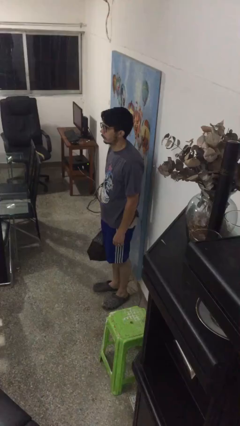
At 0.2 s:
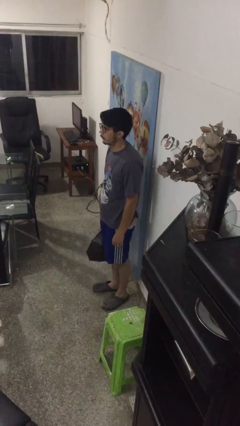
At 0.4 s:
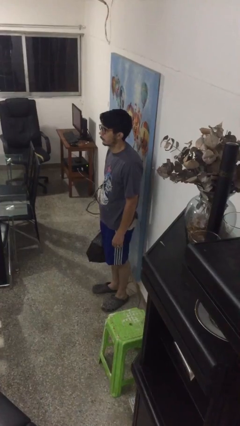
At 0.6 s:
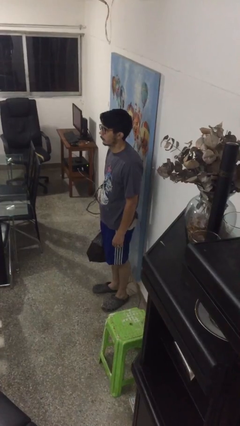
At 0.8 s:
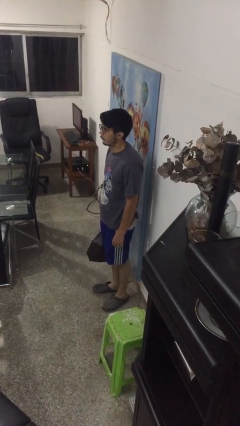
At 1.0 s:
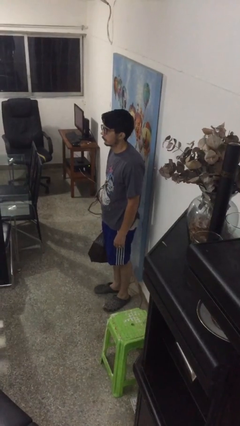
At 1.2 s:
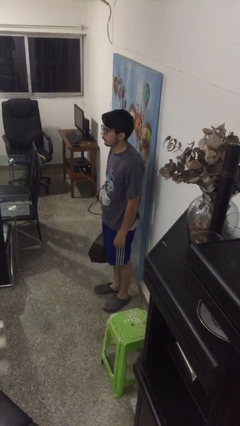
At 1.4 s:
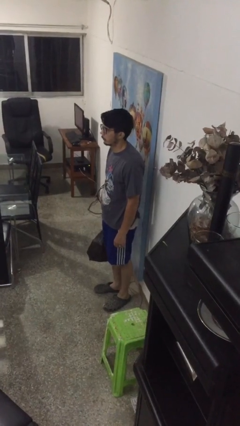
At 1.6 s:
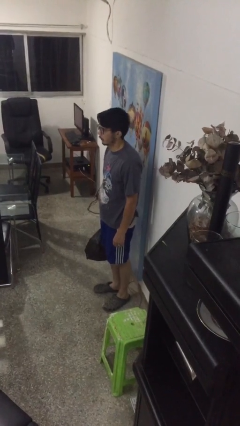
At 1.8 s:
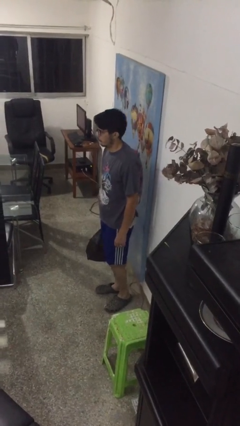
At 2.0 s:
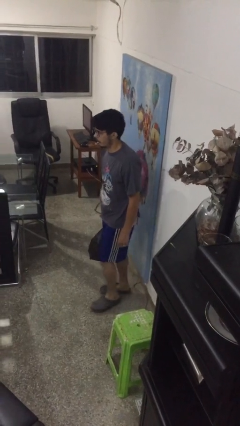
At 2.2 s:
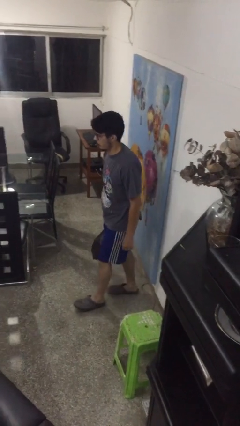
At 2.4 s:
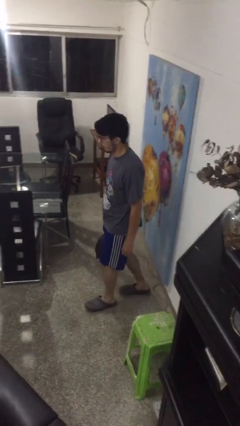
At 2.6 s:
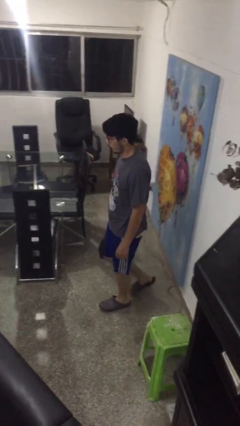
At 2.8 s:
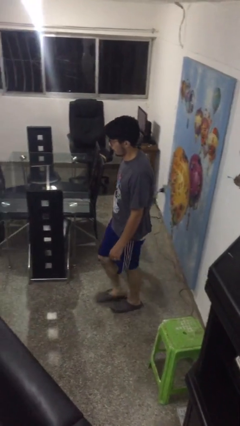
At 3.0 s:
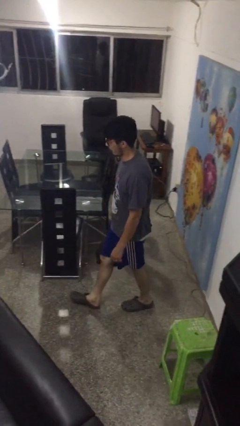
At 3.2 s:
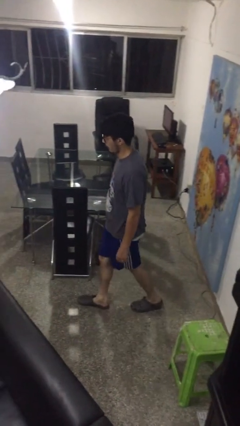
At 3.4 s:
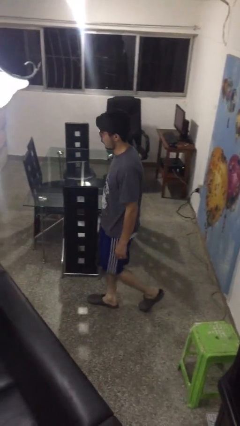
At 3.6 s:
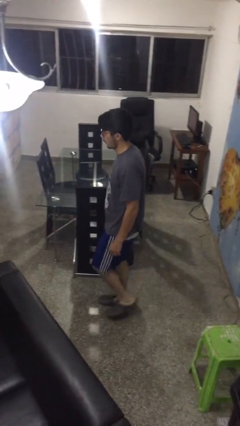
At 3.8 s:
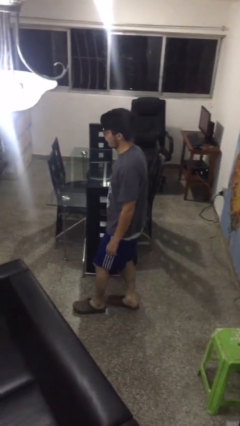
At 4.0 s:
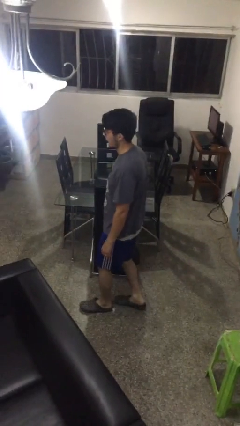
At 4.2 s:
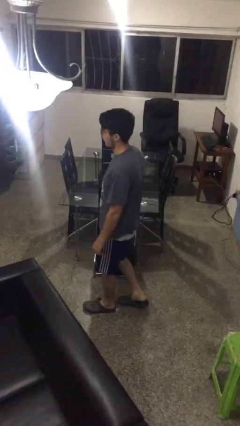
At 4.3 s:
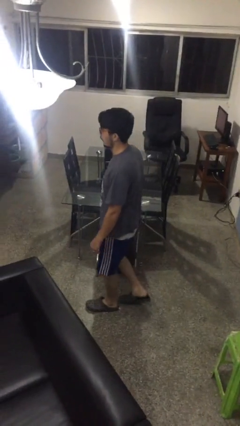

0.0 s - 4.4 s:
person carries groceries

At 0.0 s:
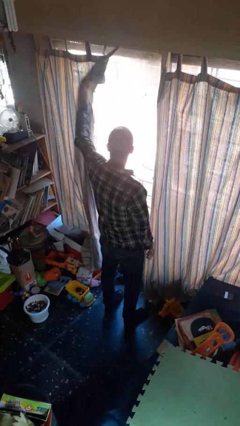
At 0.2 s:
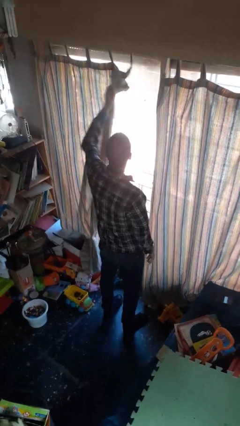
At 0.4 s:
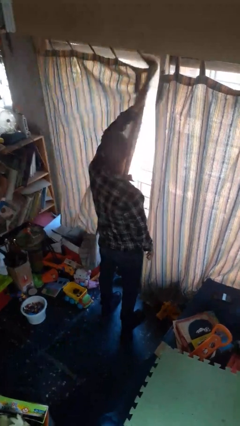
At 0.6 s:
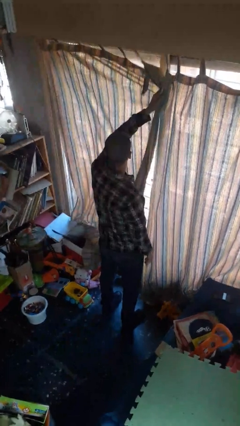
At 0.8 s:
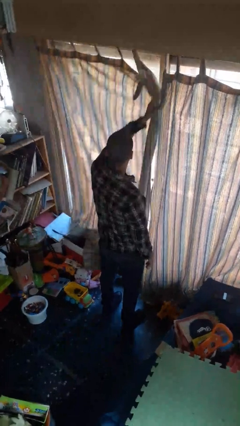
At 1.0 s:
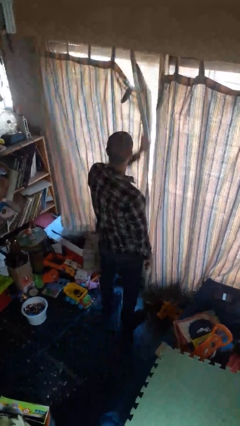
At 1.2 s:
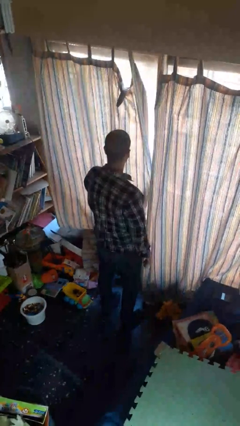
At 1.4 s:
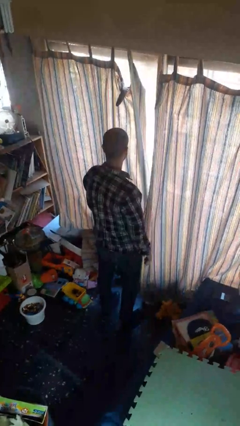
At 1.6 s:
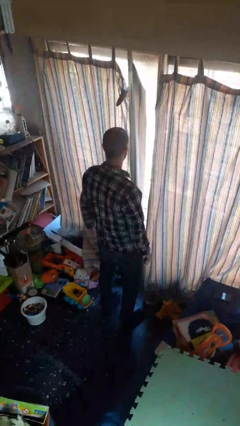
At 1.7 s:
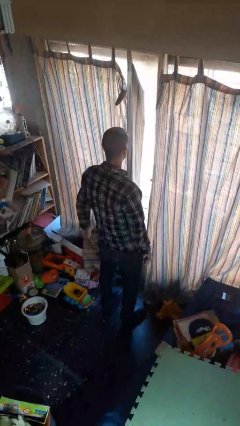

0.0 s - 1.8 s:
person closes curtains

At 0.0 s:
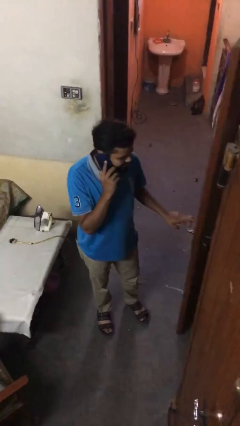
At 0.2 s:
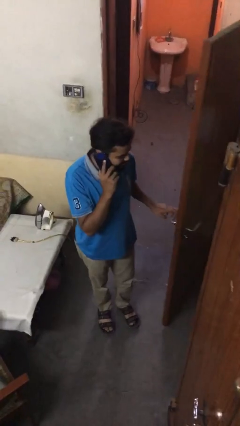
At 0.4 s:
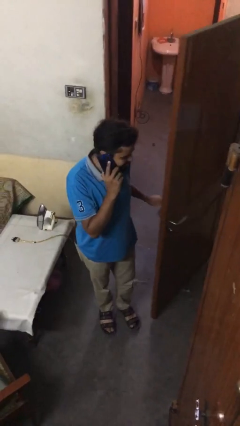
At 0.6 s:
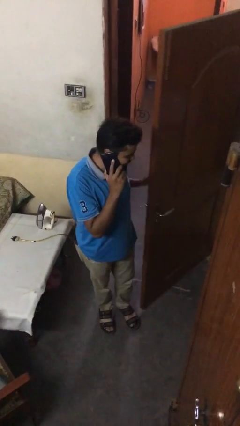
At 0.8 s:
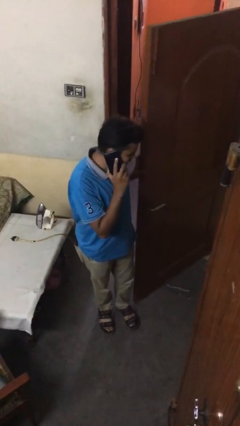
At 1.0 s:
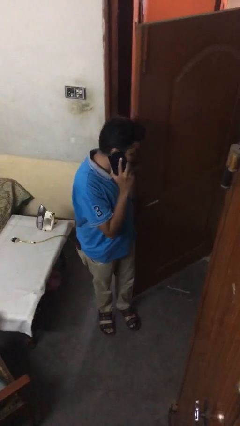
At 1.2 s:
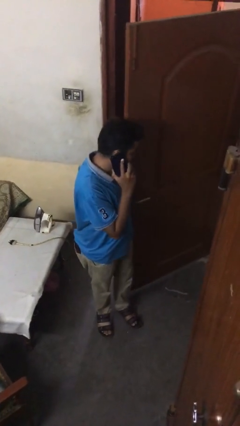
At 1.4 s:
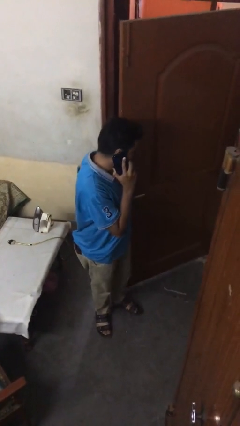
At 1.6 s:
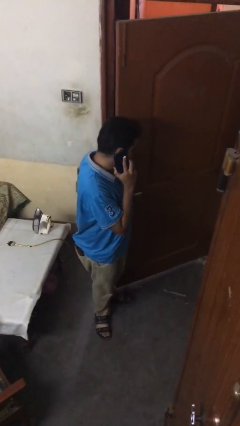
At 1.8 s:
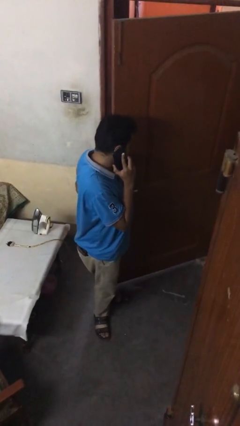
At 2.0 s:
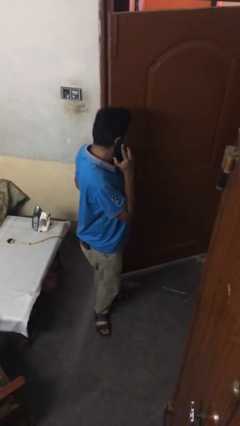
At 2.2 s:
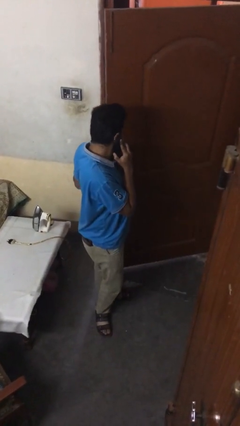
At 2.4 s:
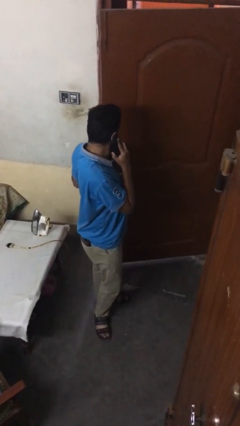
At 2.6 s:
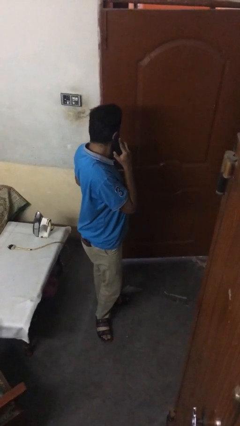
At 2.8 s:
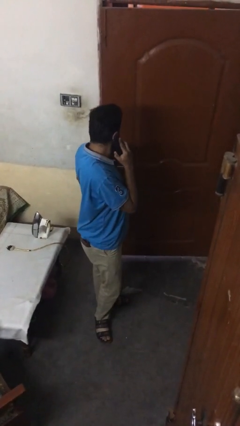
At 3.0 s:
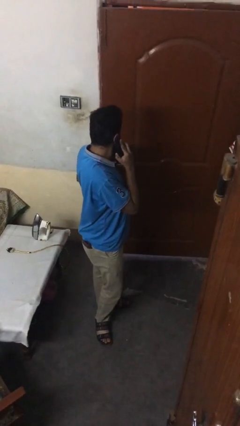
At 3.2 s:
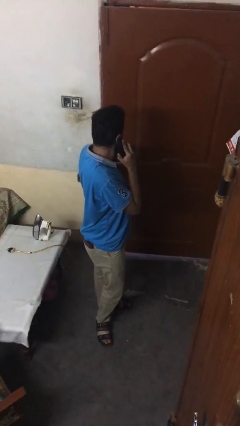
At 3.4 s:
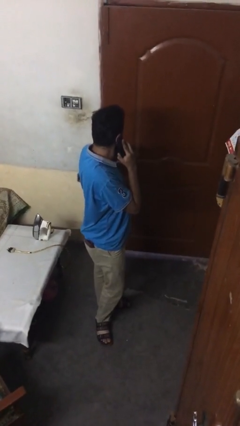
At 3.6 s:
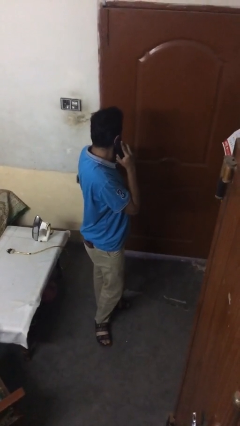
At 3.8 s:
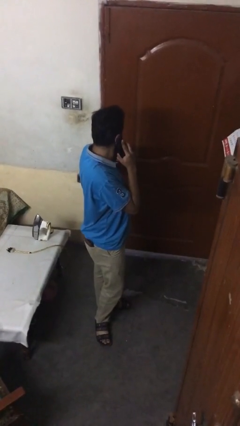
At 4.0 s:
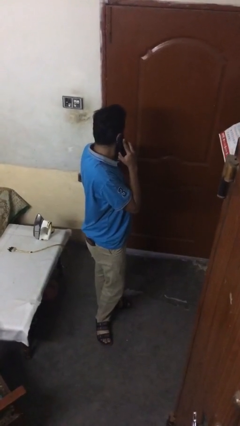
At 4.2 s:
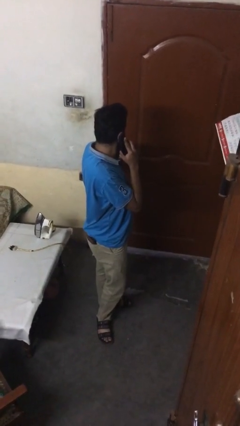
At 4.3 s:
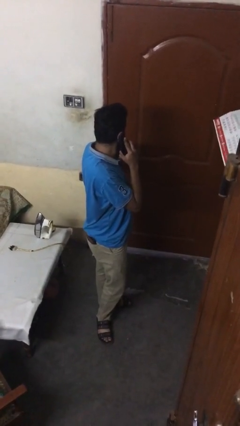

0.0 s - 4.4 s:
person closes facility door

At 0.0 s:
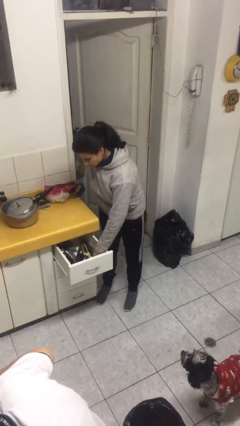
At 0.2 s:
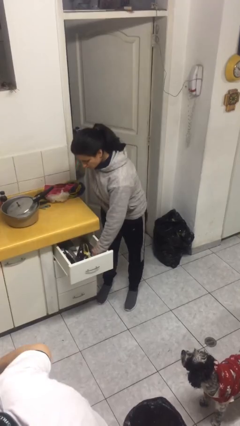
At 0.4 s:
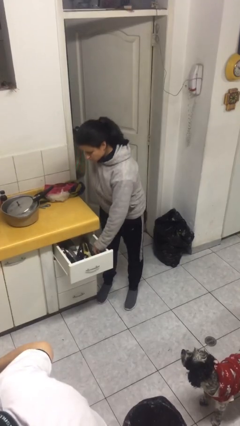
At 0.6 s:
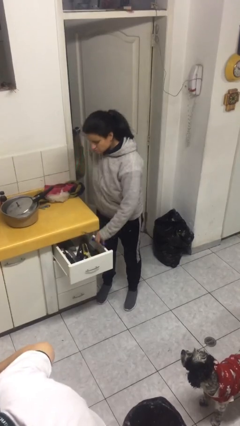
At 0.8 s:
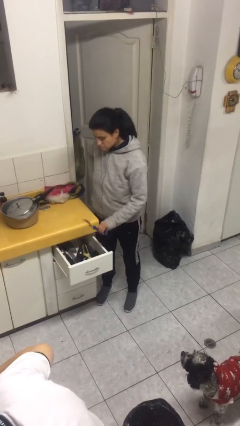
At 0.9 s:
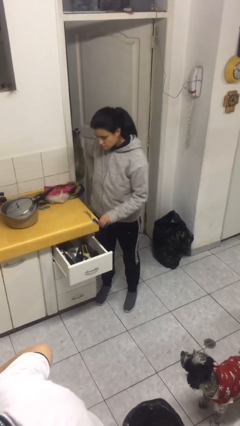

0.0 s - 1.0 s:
person takes object from kitchen drawer

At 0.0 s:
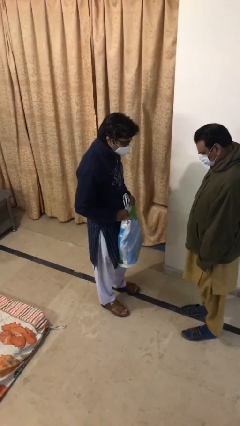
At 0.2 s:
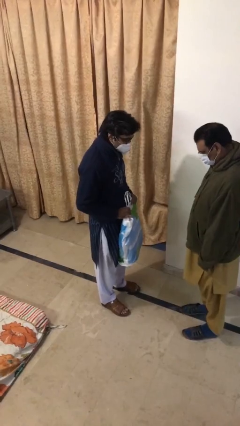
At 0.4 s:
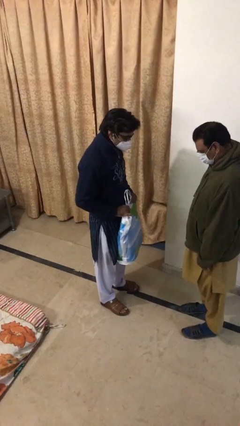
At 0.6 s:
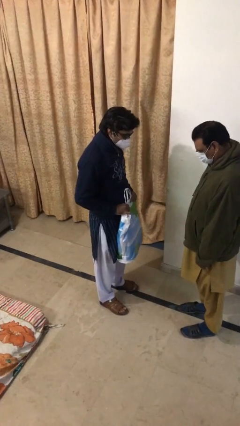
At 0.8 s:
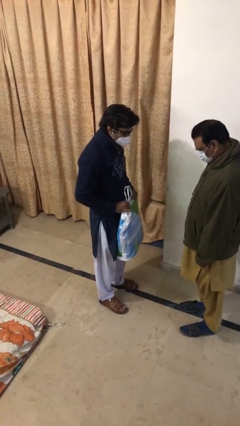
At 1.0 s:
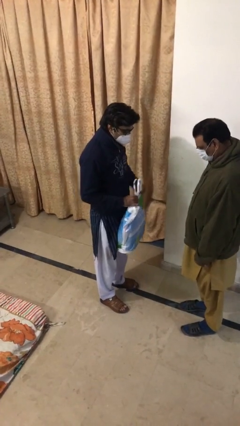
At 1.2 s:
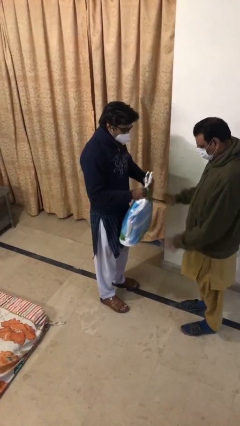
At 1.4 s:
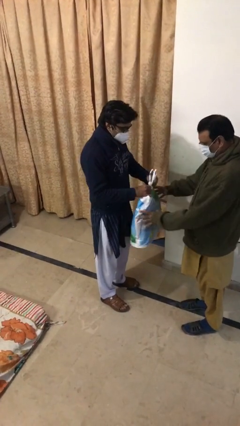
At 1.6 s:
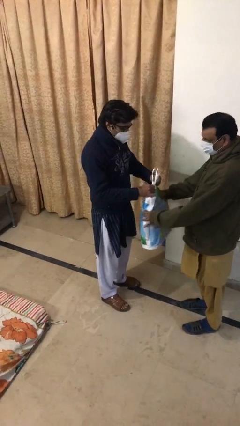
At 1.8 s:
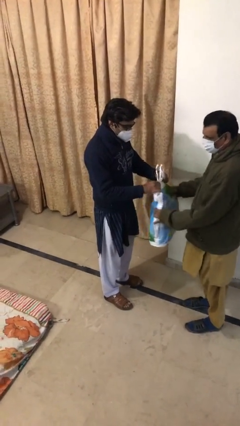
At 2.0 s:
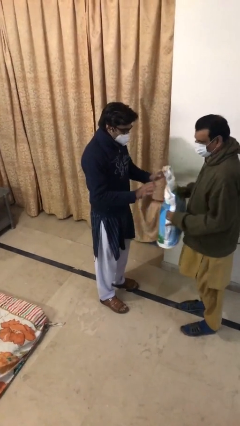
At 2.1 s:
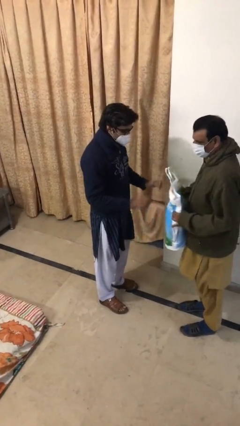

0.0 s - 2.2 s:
person transfers object to person

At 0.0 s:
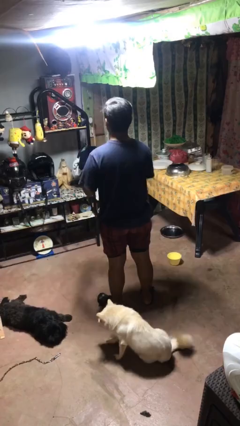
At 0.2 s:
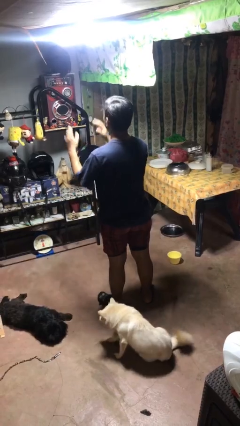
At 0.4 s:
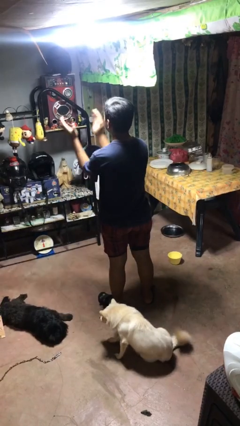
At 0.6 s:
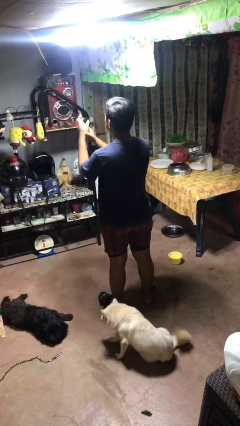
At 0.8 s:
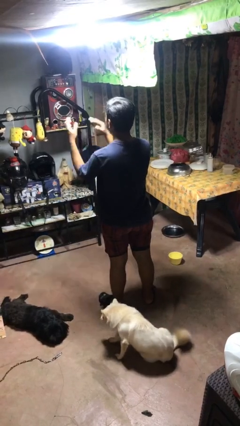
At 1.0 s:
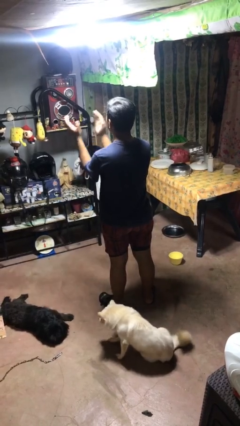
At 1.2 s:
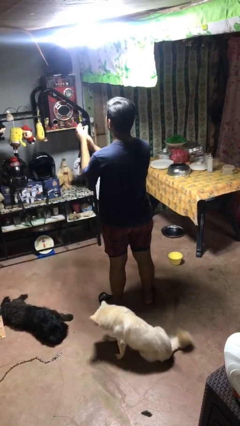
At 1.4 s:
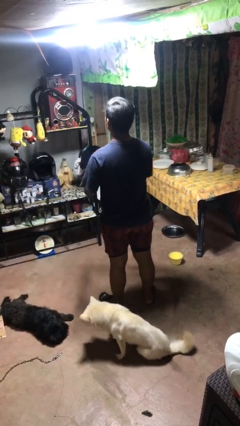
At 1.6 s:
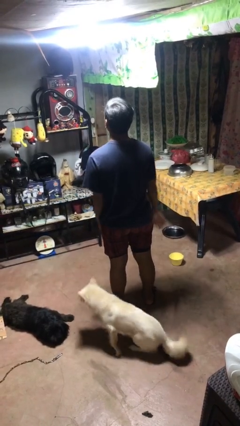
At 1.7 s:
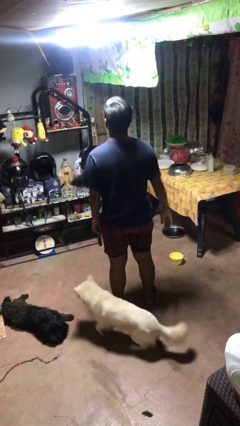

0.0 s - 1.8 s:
person claps hands

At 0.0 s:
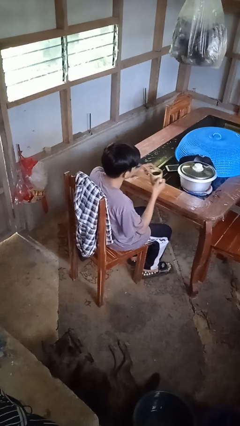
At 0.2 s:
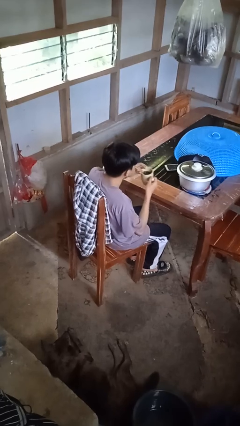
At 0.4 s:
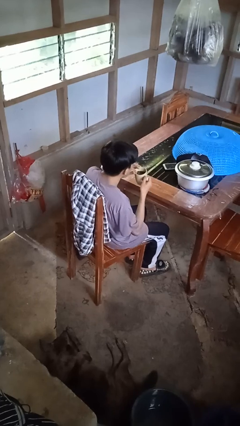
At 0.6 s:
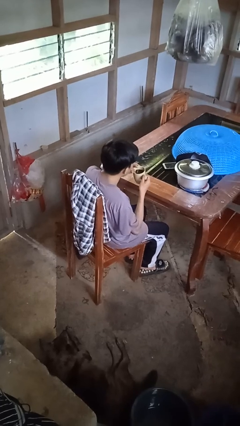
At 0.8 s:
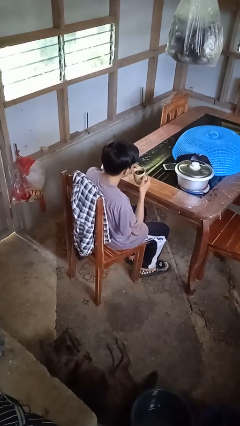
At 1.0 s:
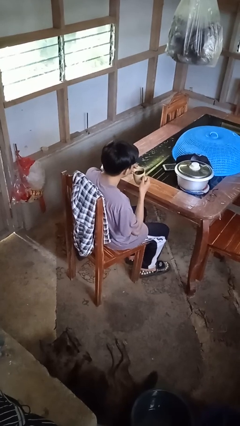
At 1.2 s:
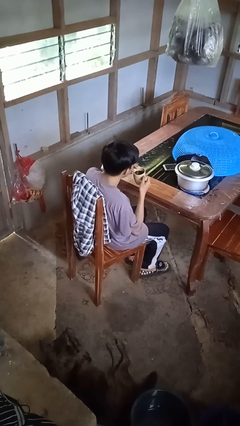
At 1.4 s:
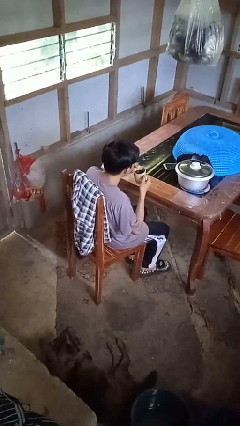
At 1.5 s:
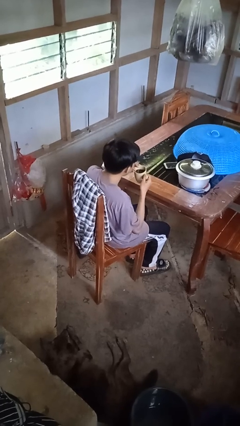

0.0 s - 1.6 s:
person drinks from straw
